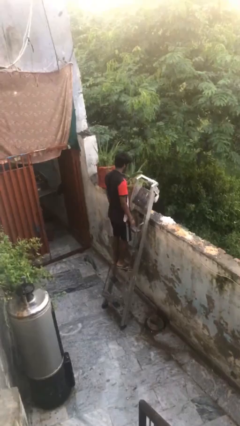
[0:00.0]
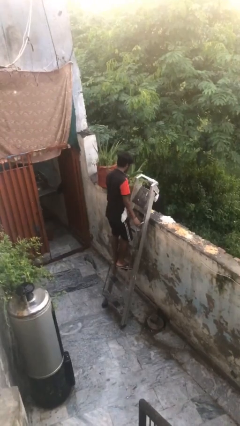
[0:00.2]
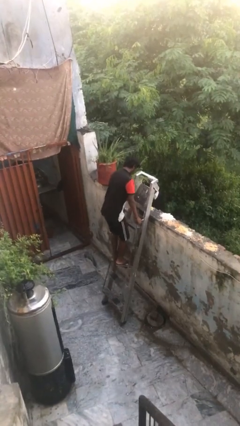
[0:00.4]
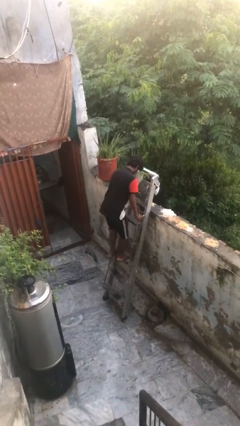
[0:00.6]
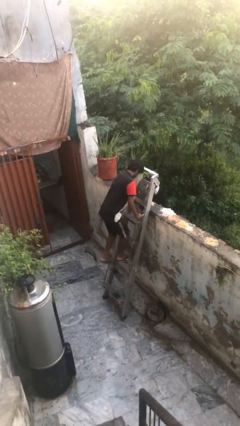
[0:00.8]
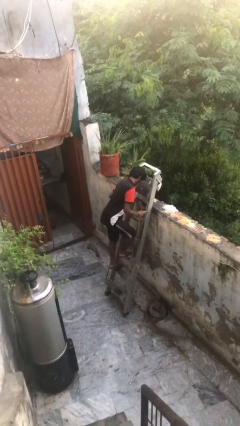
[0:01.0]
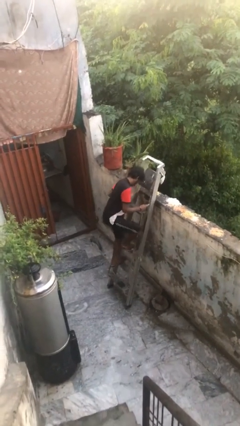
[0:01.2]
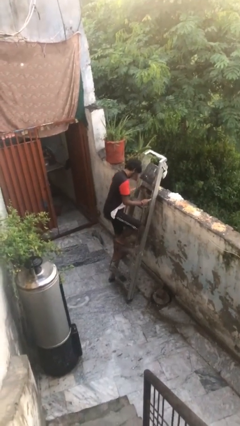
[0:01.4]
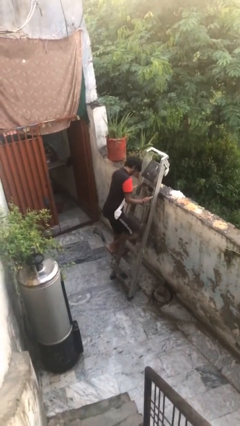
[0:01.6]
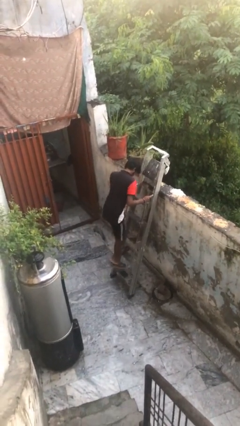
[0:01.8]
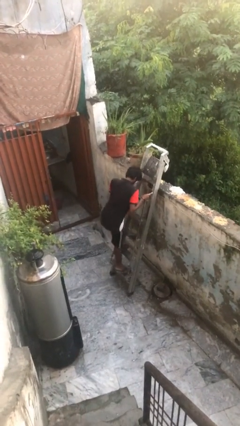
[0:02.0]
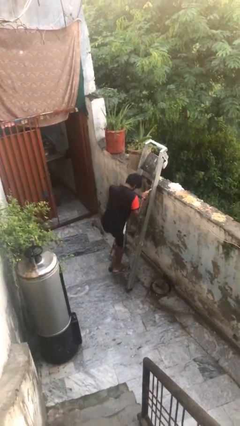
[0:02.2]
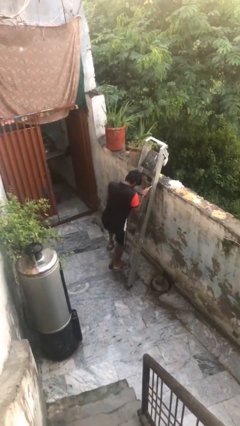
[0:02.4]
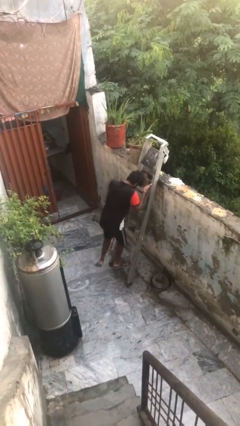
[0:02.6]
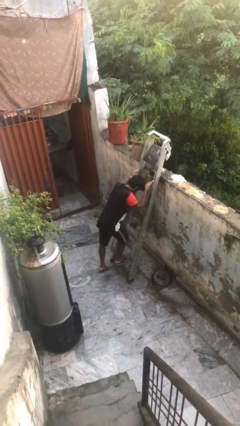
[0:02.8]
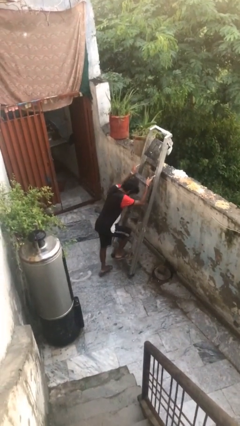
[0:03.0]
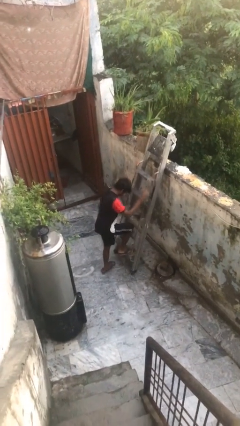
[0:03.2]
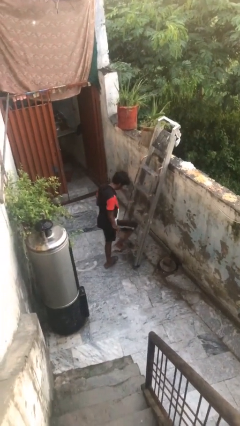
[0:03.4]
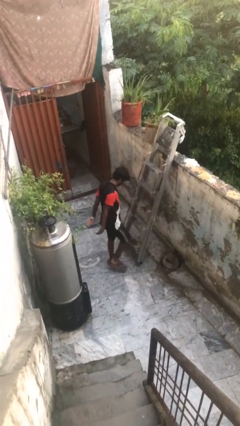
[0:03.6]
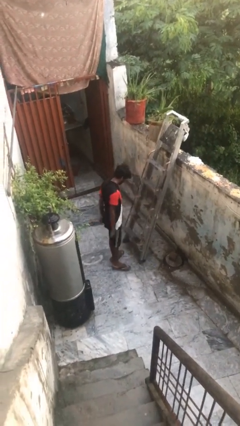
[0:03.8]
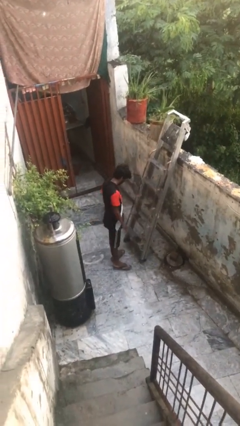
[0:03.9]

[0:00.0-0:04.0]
person climbs down ladder

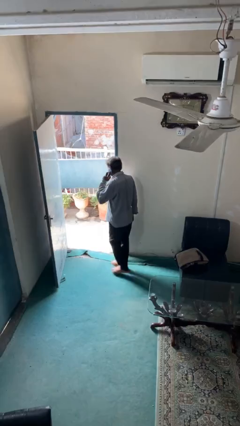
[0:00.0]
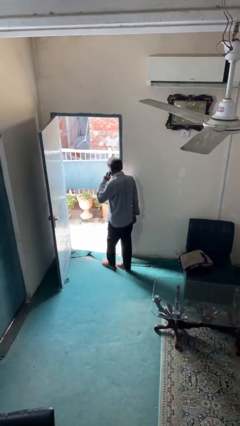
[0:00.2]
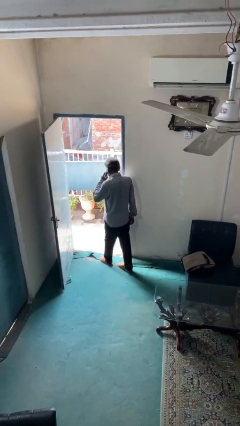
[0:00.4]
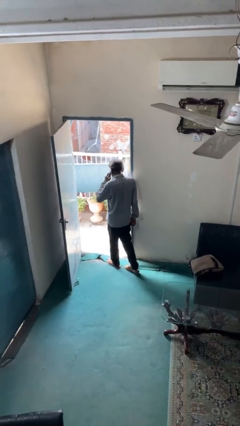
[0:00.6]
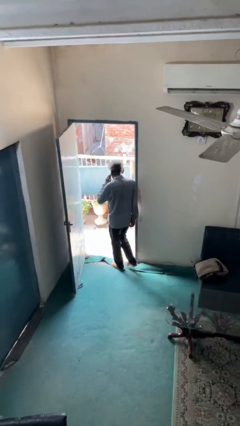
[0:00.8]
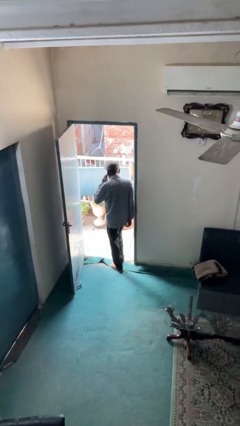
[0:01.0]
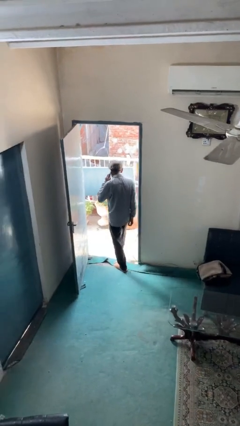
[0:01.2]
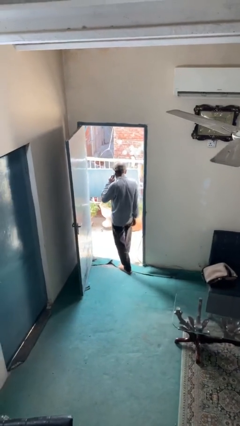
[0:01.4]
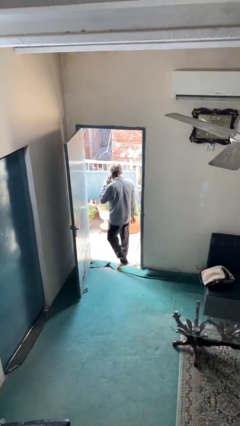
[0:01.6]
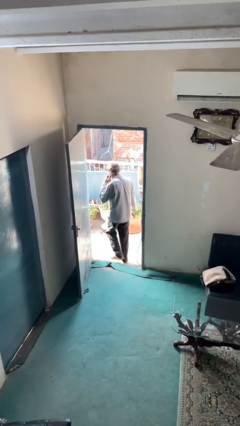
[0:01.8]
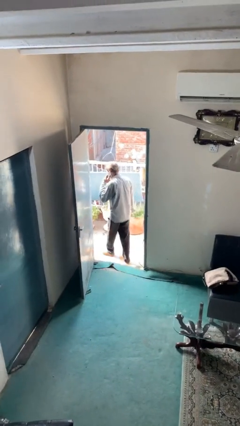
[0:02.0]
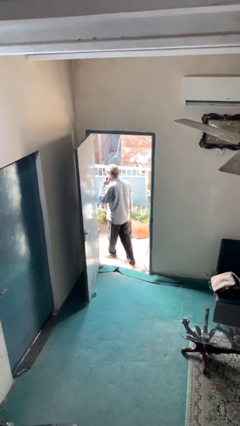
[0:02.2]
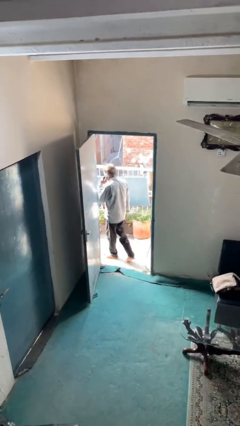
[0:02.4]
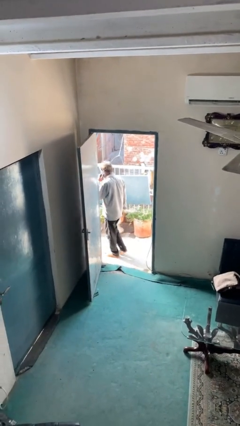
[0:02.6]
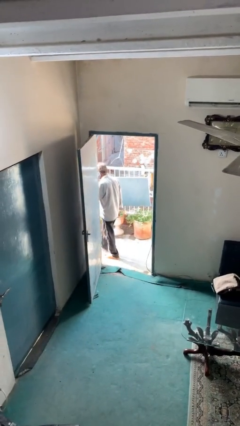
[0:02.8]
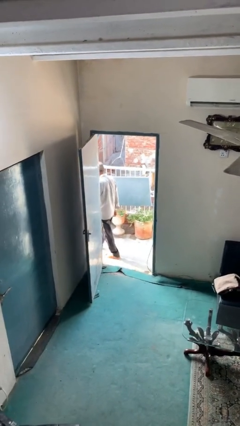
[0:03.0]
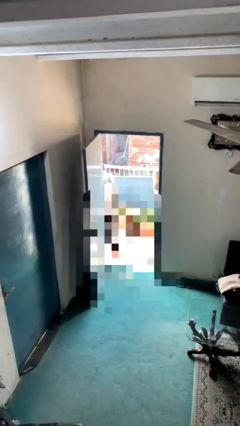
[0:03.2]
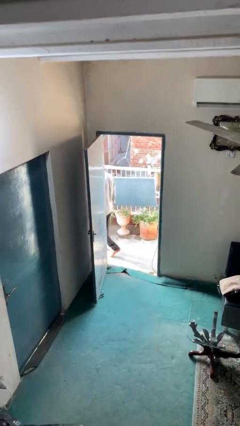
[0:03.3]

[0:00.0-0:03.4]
person exits scene through structure

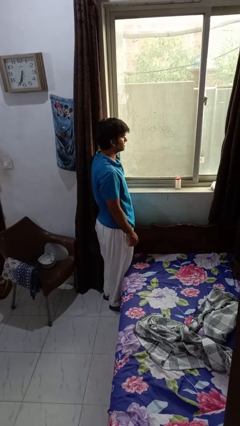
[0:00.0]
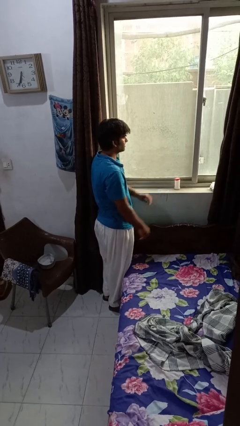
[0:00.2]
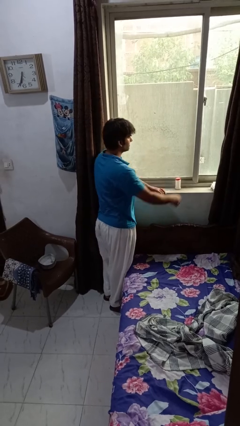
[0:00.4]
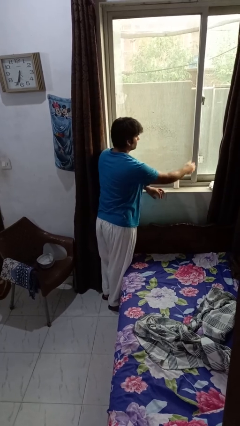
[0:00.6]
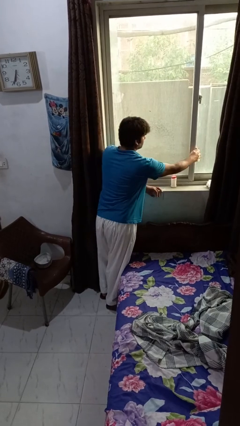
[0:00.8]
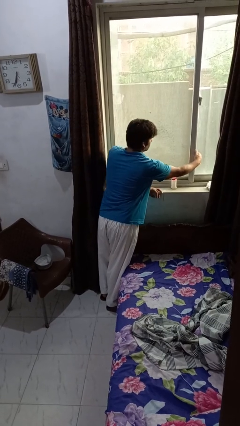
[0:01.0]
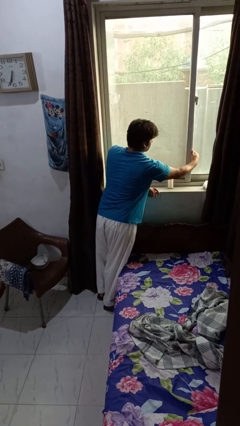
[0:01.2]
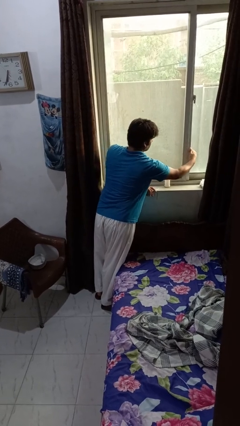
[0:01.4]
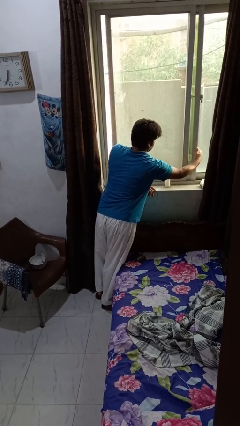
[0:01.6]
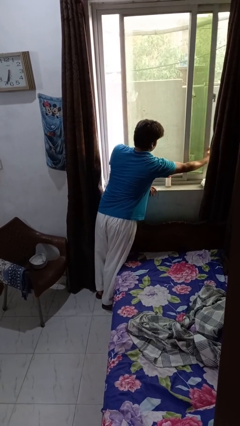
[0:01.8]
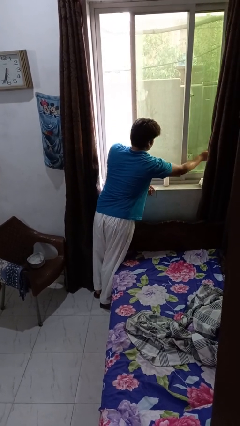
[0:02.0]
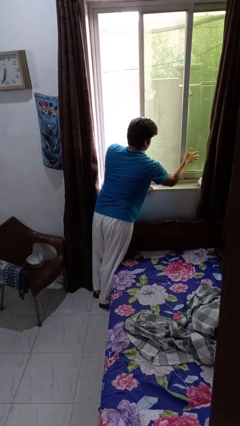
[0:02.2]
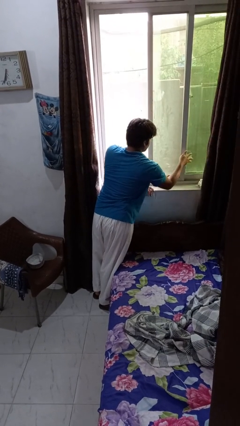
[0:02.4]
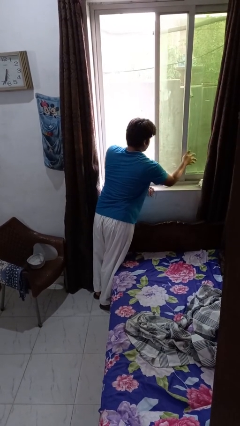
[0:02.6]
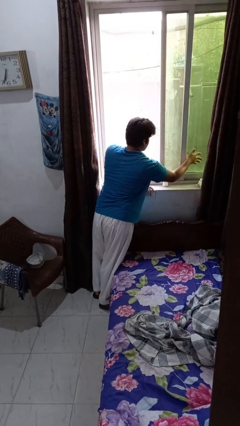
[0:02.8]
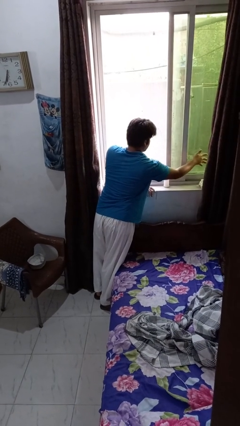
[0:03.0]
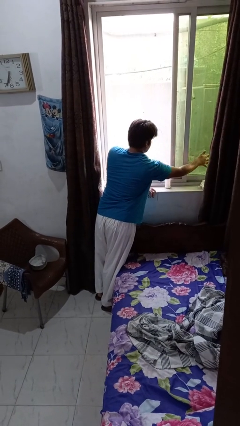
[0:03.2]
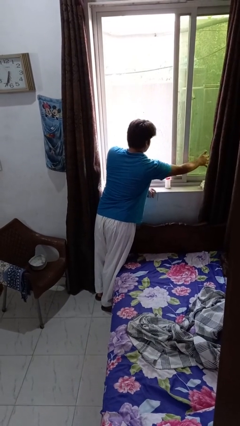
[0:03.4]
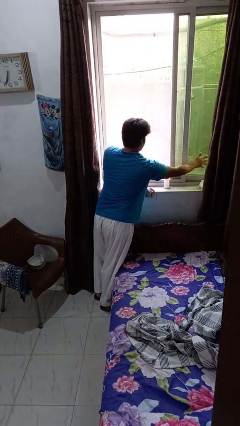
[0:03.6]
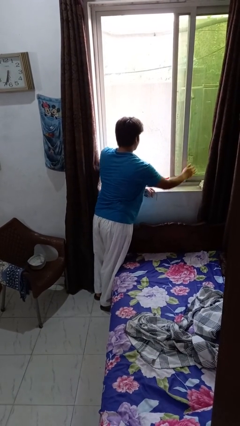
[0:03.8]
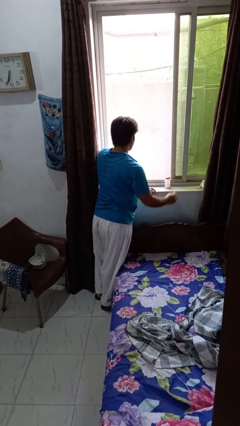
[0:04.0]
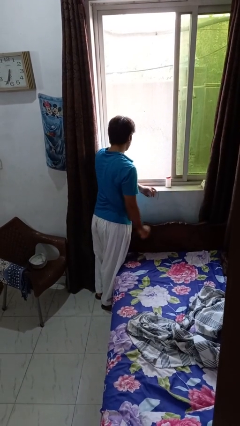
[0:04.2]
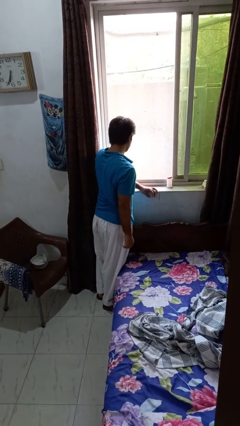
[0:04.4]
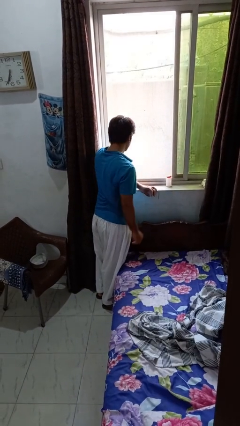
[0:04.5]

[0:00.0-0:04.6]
person opens home window

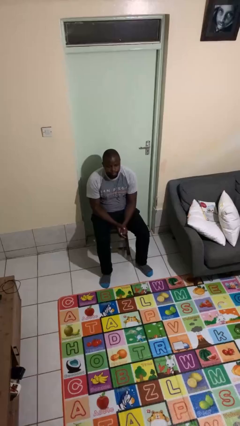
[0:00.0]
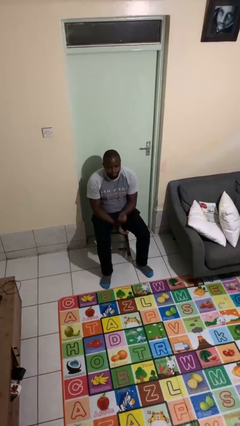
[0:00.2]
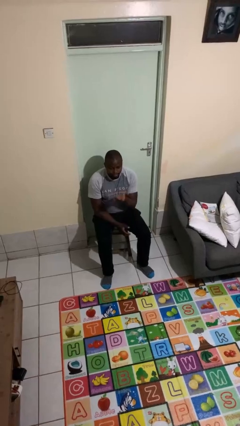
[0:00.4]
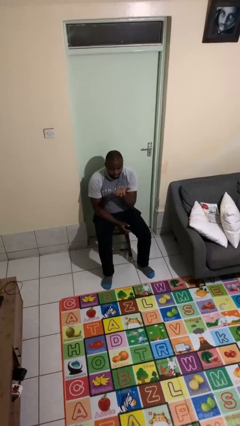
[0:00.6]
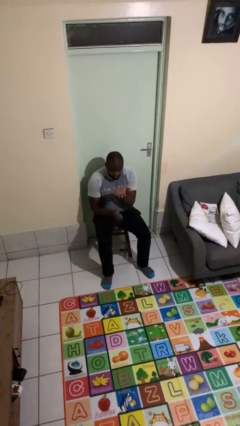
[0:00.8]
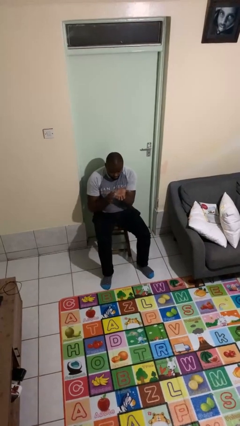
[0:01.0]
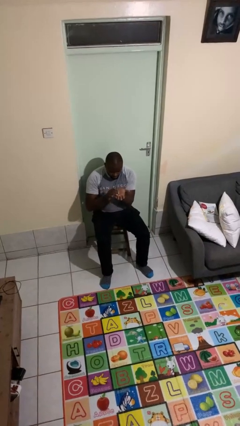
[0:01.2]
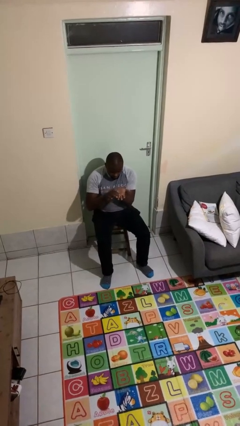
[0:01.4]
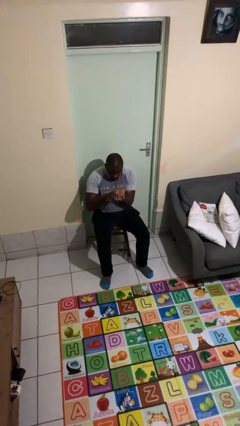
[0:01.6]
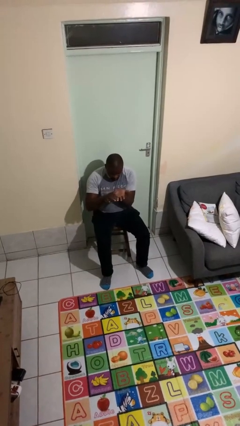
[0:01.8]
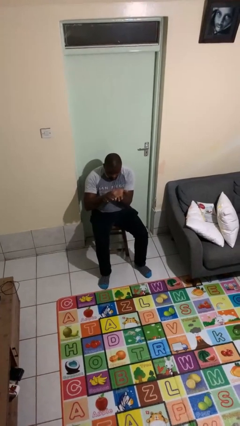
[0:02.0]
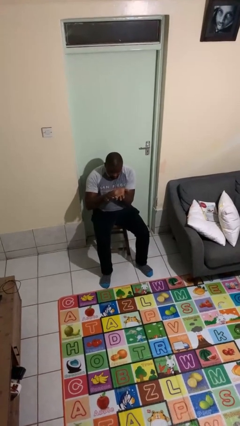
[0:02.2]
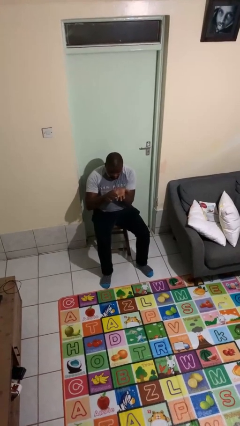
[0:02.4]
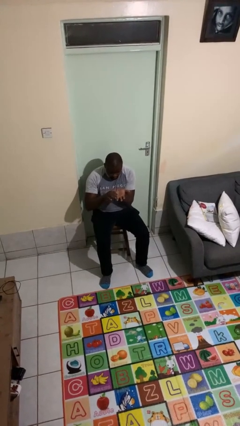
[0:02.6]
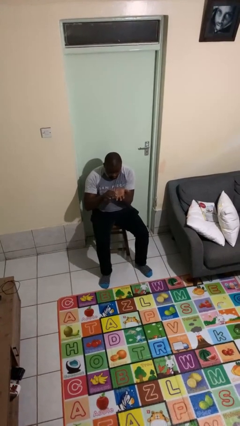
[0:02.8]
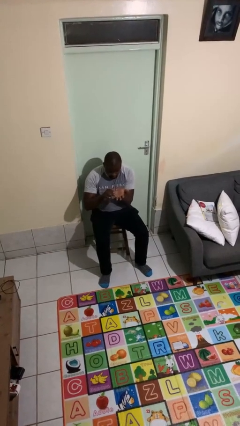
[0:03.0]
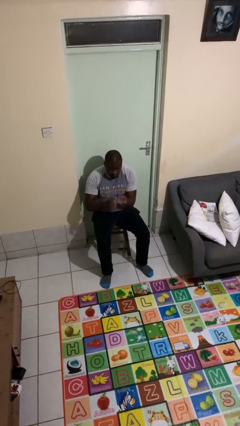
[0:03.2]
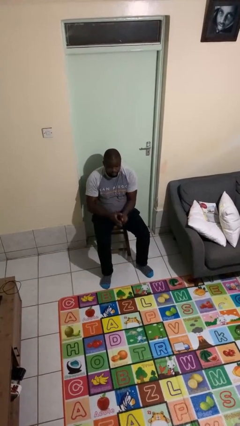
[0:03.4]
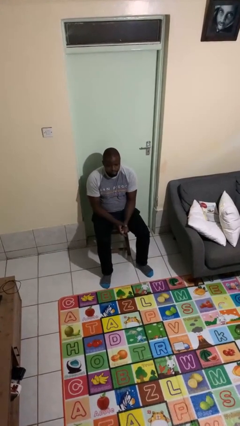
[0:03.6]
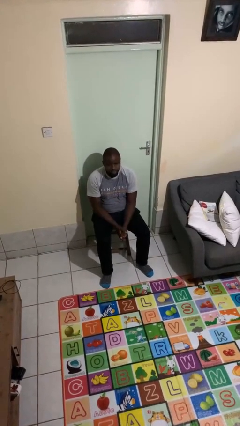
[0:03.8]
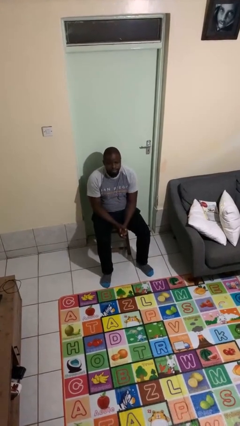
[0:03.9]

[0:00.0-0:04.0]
person looks at hands in lap

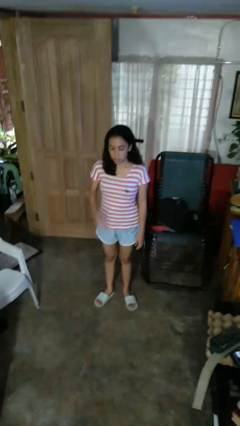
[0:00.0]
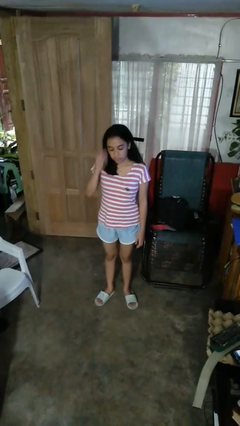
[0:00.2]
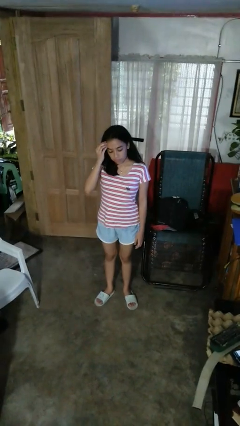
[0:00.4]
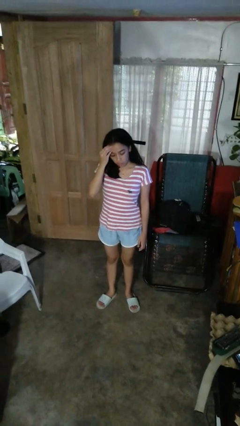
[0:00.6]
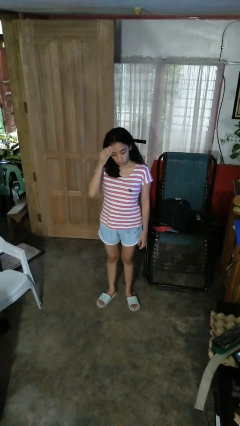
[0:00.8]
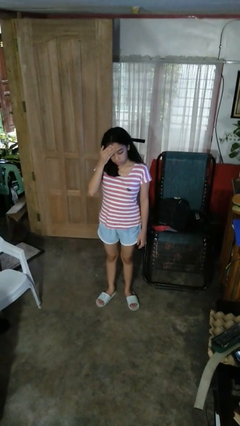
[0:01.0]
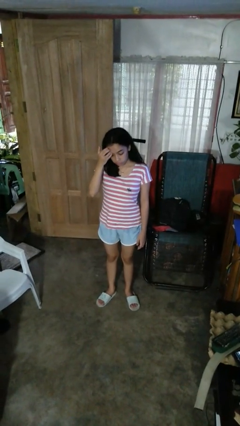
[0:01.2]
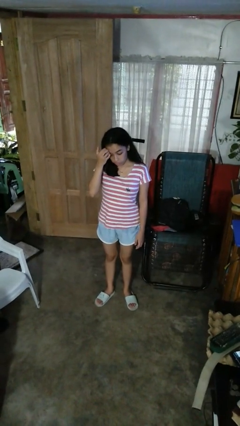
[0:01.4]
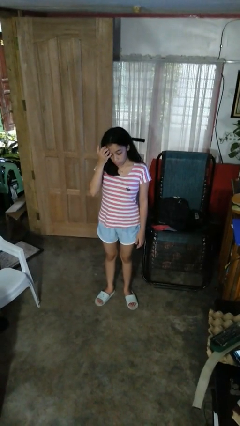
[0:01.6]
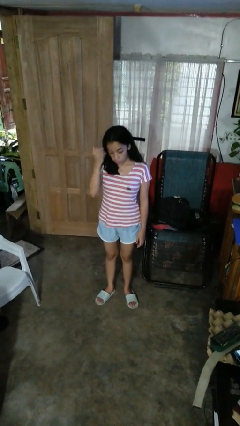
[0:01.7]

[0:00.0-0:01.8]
person scratches face
